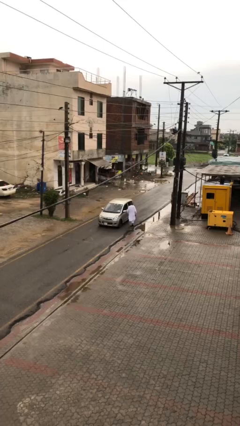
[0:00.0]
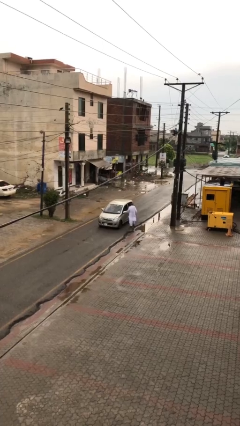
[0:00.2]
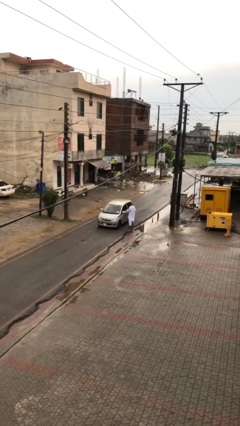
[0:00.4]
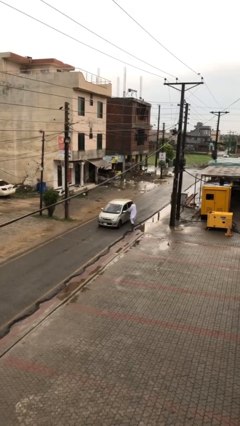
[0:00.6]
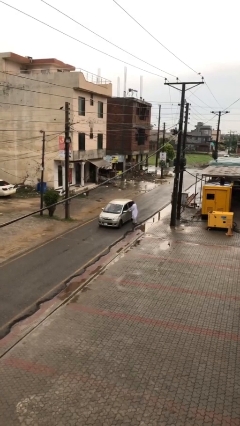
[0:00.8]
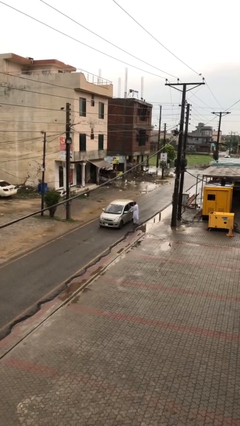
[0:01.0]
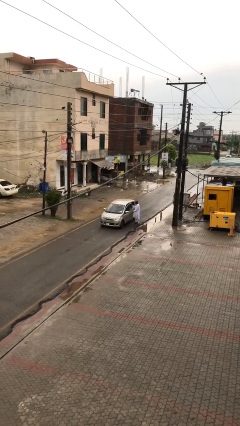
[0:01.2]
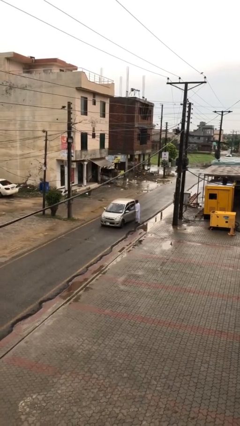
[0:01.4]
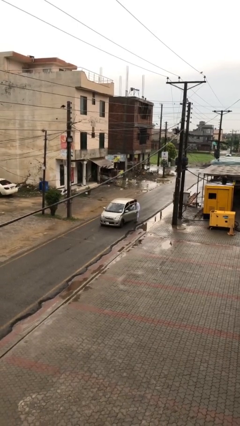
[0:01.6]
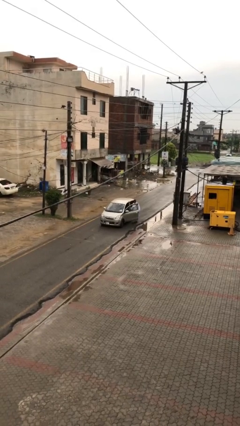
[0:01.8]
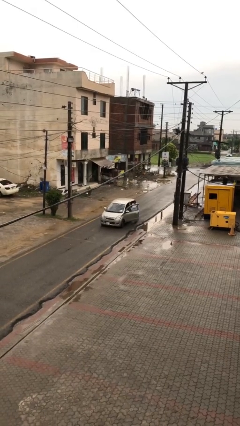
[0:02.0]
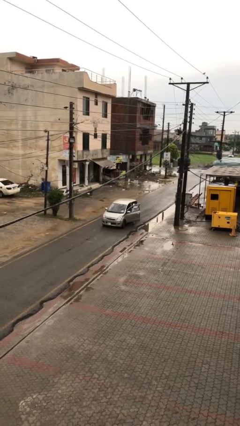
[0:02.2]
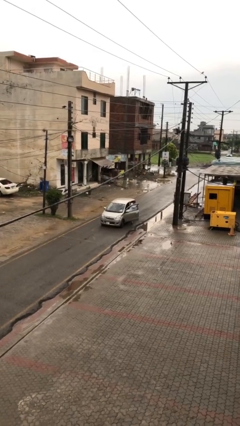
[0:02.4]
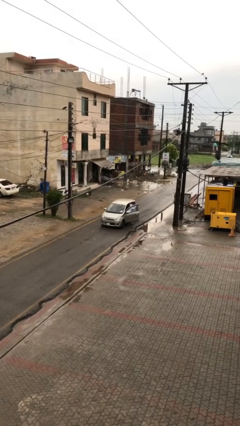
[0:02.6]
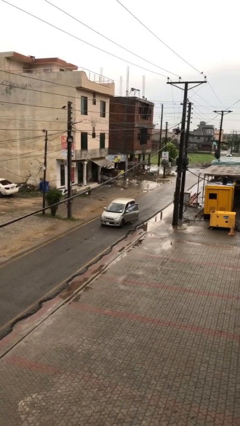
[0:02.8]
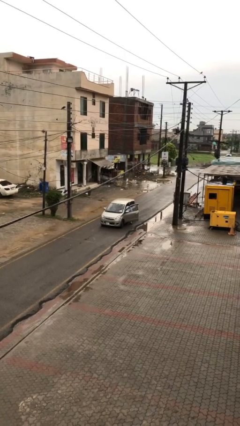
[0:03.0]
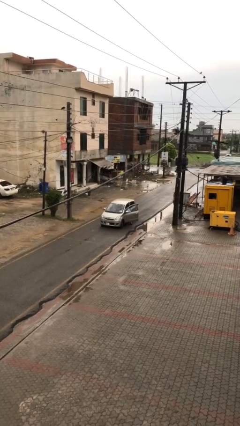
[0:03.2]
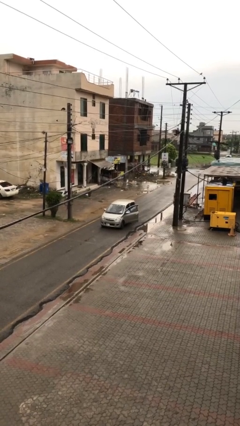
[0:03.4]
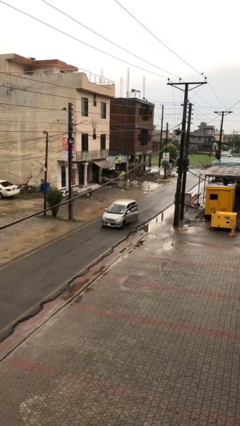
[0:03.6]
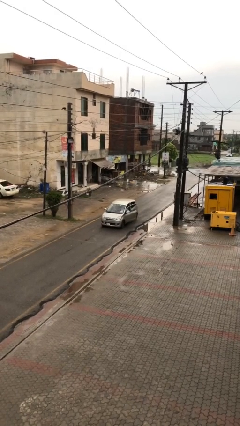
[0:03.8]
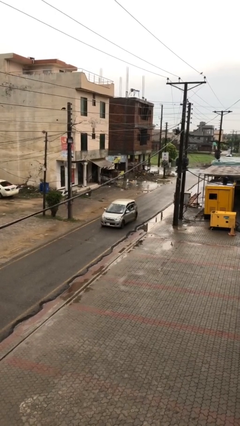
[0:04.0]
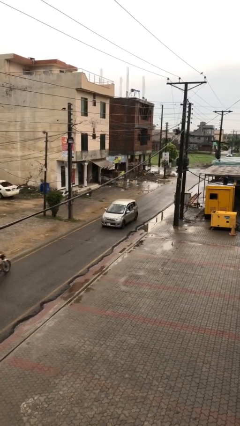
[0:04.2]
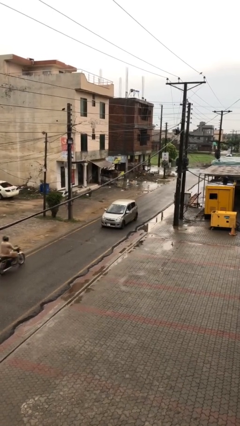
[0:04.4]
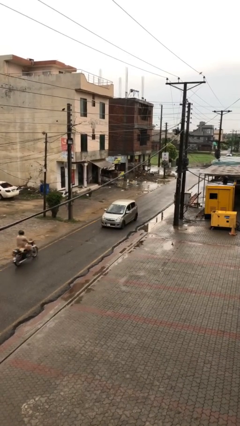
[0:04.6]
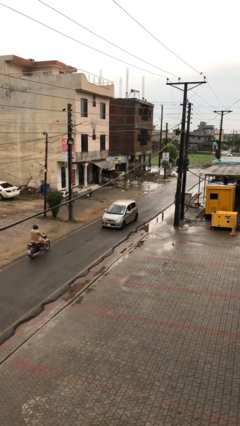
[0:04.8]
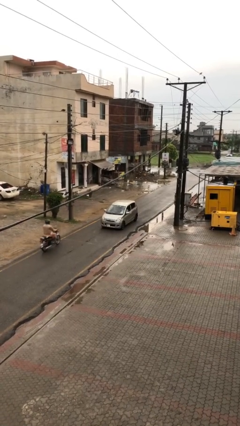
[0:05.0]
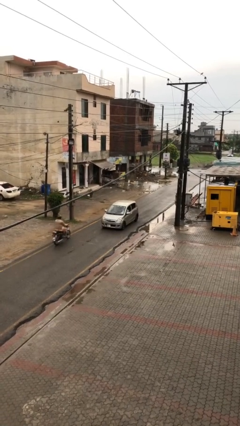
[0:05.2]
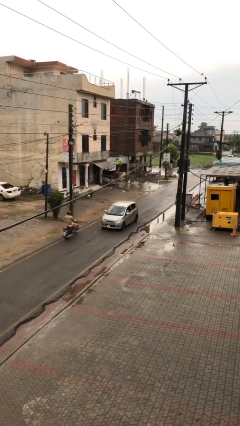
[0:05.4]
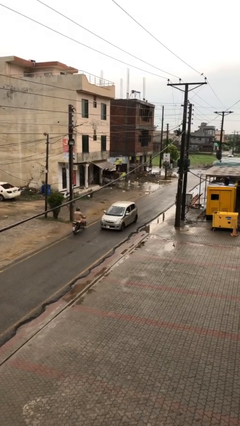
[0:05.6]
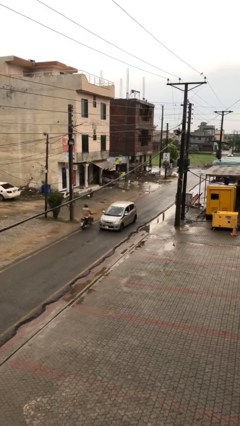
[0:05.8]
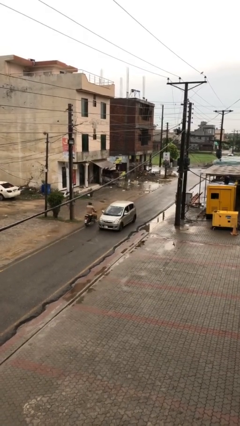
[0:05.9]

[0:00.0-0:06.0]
car picks up person

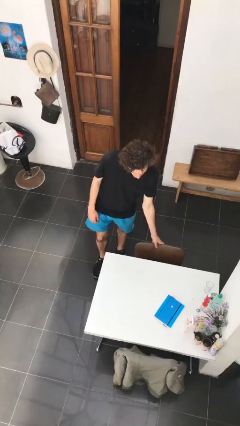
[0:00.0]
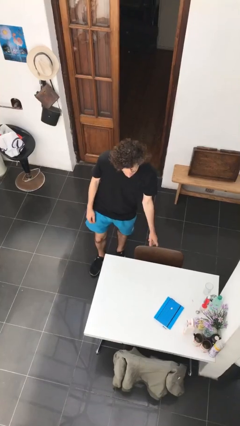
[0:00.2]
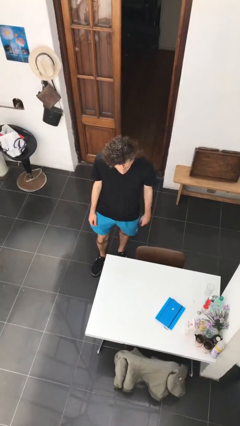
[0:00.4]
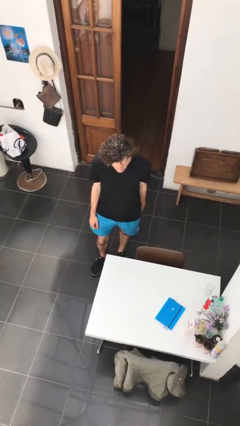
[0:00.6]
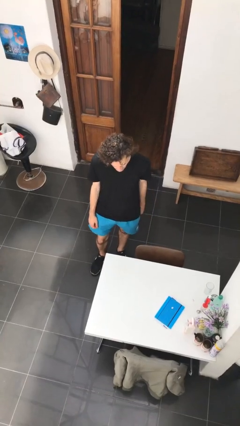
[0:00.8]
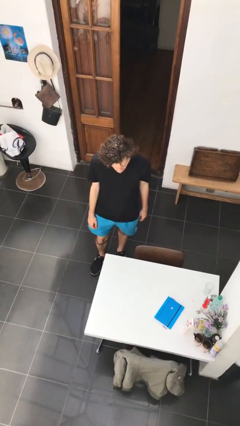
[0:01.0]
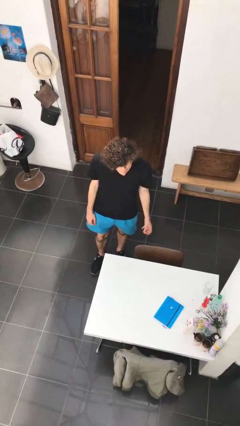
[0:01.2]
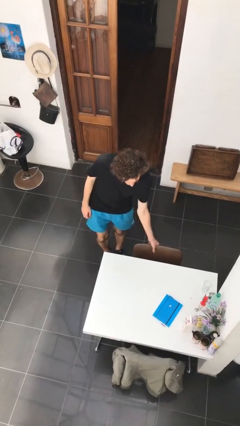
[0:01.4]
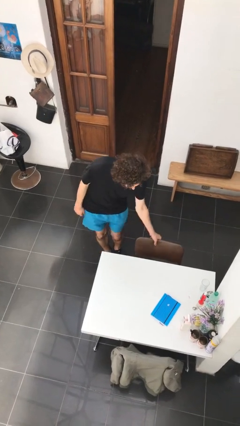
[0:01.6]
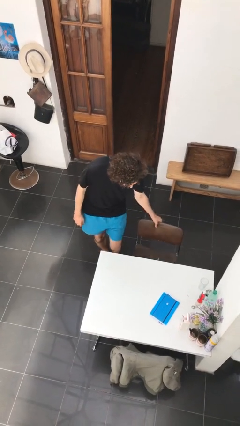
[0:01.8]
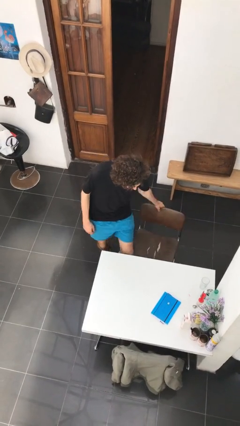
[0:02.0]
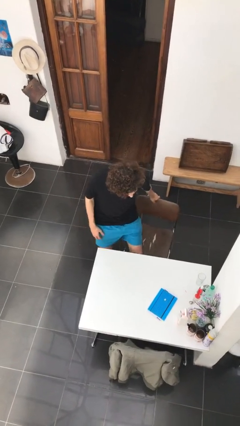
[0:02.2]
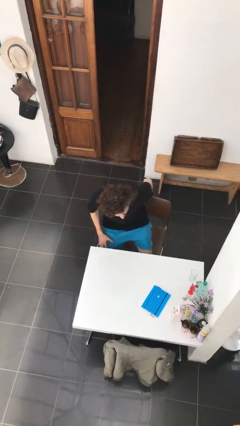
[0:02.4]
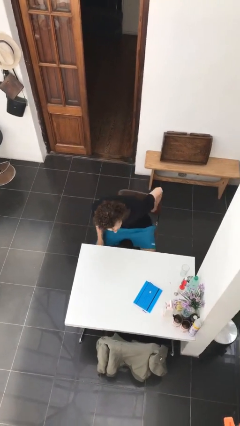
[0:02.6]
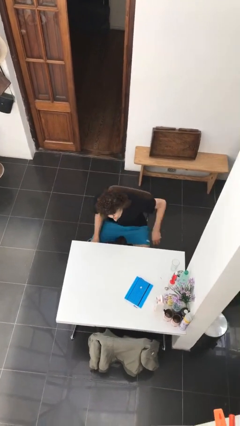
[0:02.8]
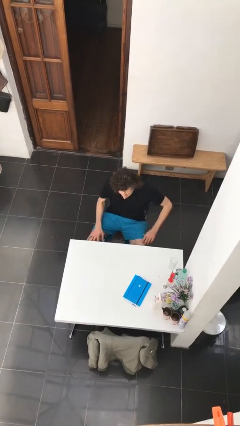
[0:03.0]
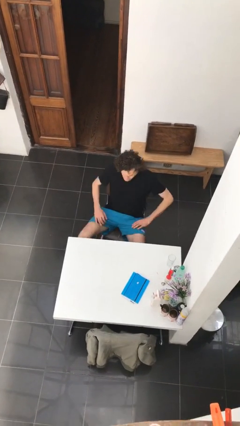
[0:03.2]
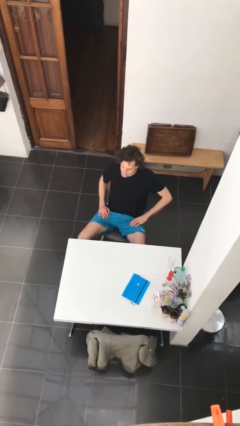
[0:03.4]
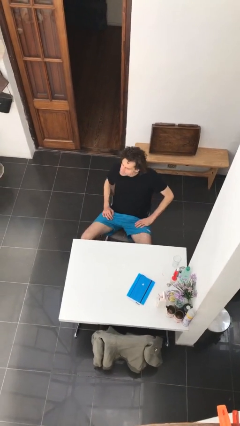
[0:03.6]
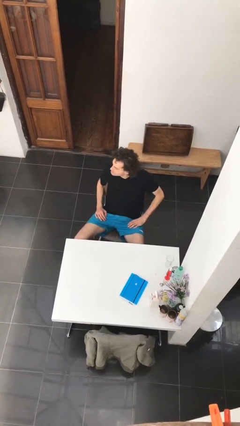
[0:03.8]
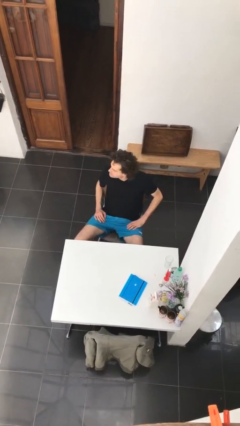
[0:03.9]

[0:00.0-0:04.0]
person sits down

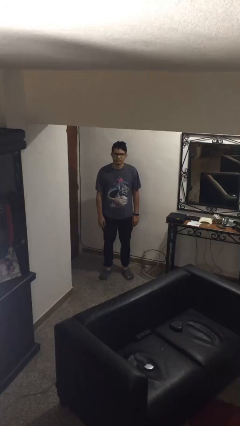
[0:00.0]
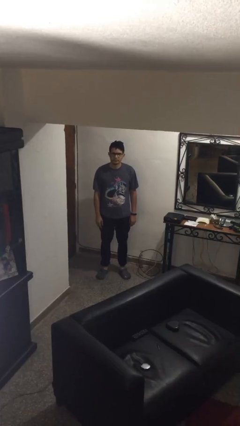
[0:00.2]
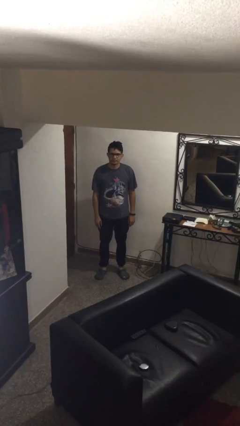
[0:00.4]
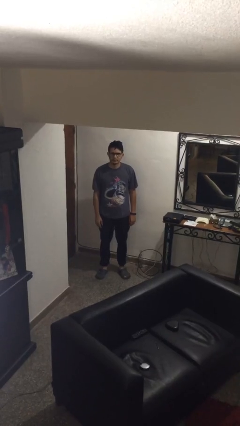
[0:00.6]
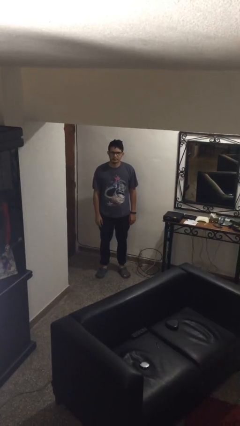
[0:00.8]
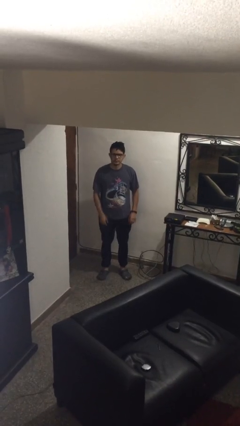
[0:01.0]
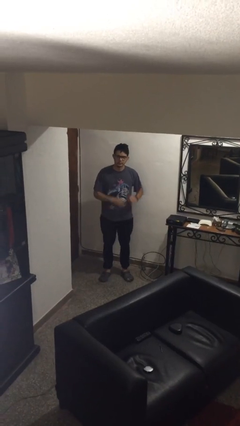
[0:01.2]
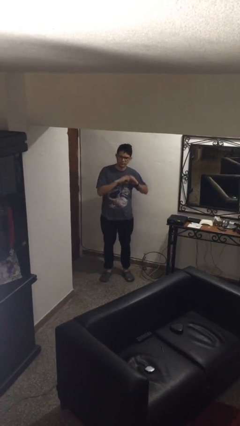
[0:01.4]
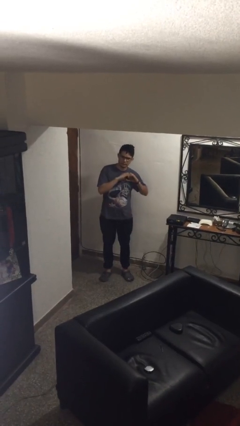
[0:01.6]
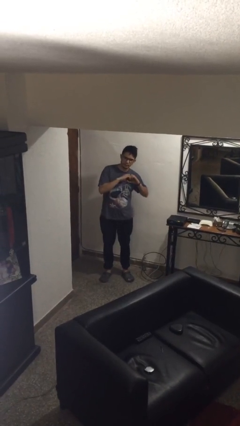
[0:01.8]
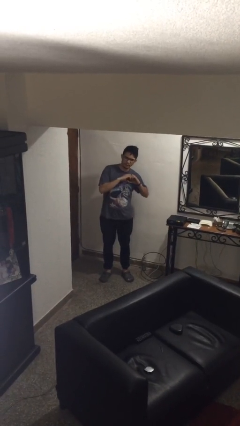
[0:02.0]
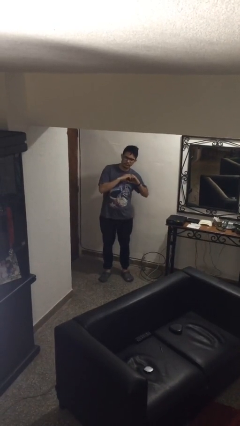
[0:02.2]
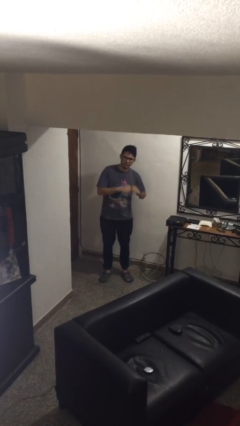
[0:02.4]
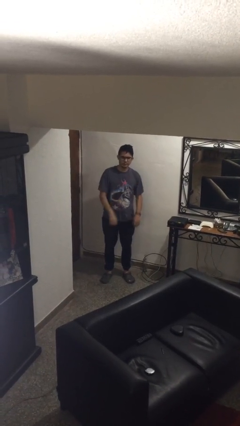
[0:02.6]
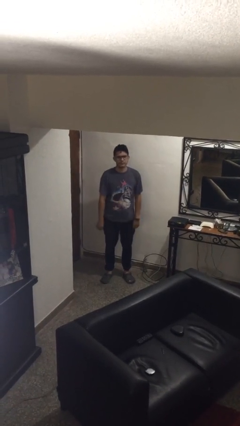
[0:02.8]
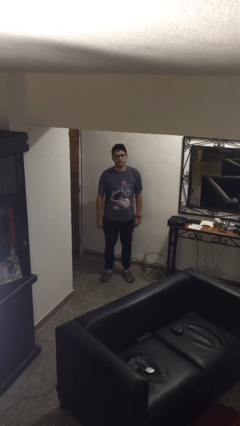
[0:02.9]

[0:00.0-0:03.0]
person gestures heart

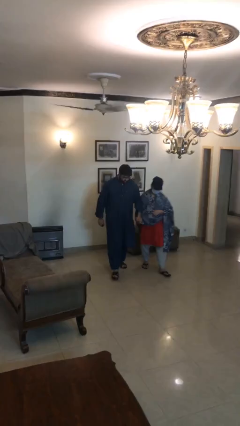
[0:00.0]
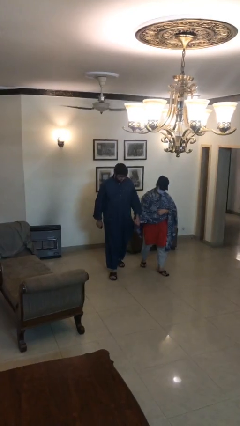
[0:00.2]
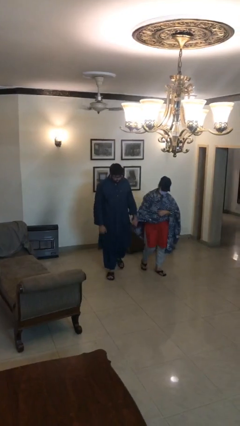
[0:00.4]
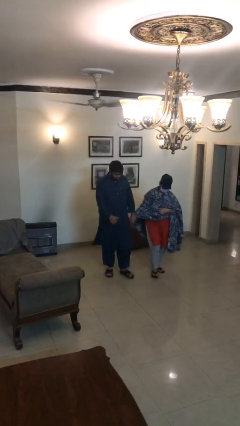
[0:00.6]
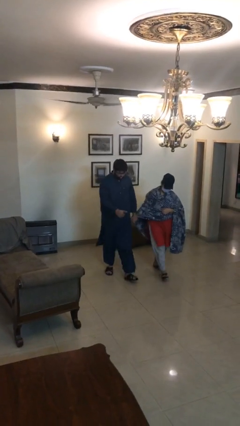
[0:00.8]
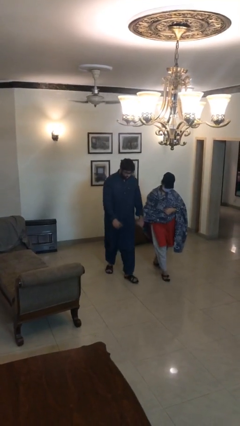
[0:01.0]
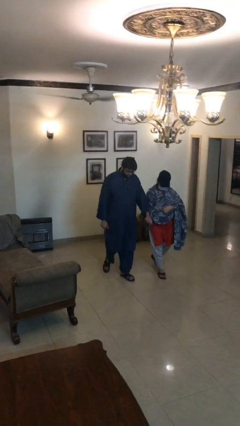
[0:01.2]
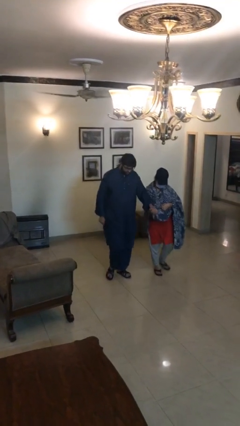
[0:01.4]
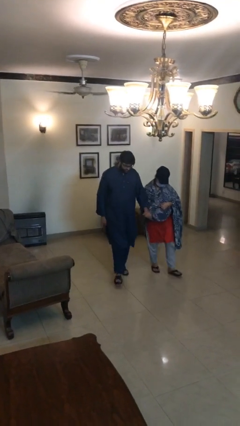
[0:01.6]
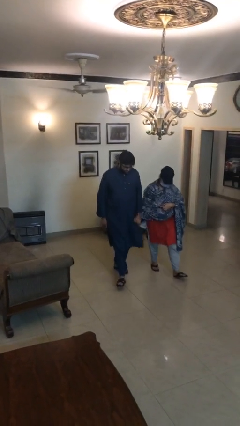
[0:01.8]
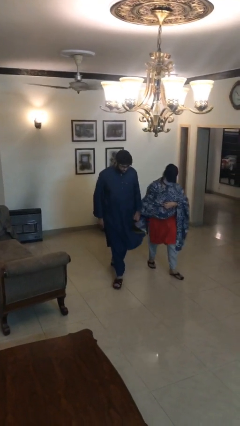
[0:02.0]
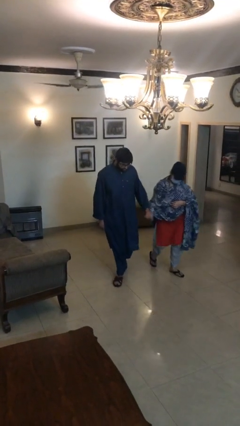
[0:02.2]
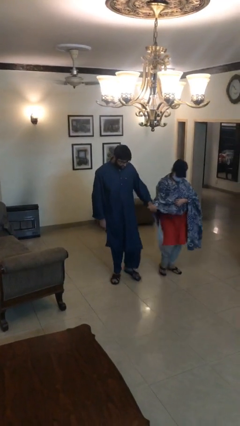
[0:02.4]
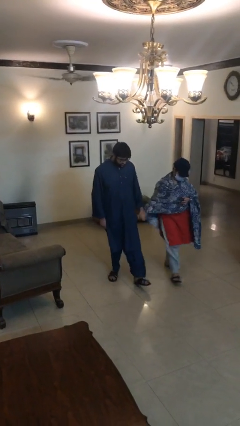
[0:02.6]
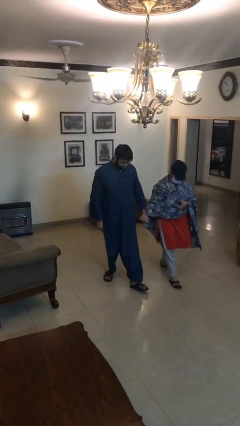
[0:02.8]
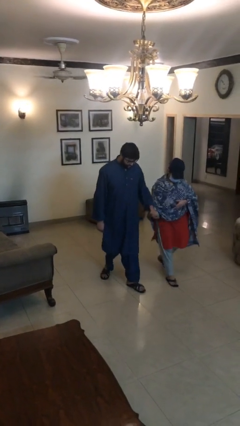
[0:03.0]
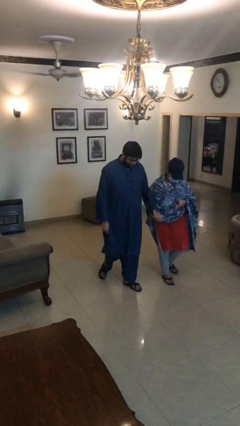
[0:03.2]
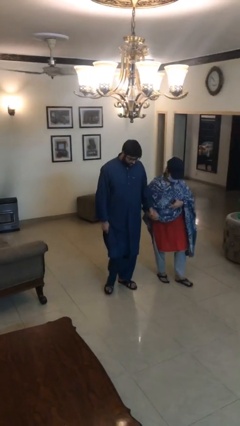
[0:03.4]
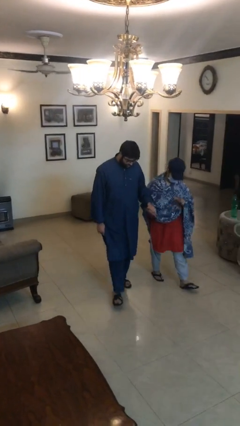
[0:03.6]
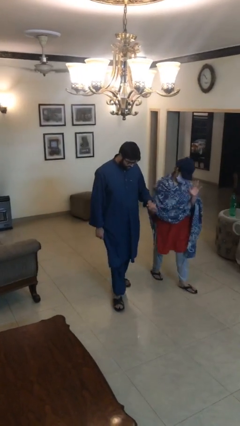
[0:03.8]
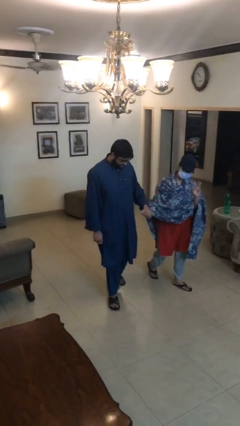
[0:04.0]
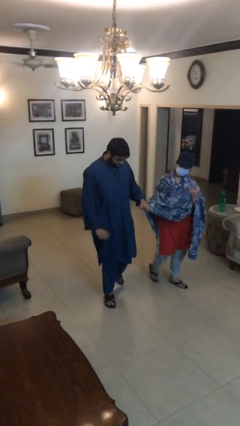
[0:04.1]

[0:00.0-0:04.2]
person holds hand

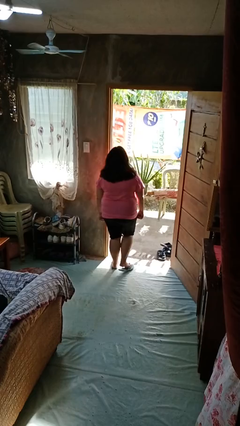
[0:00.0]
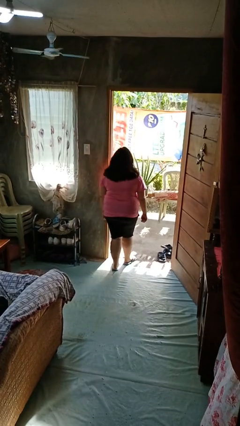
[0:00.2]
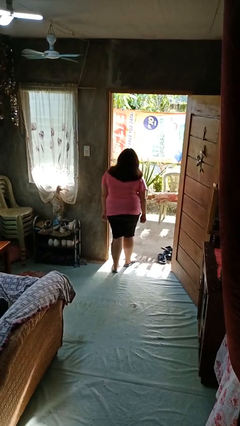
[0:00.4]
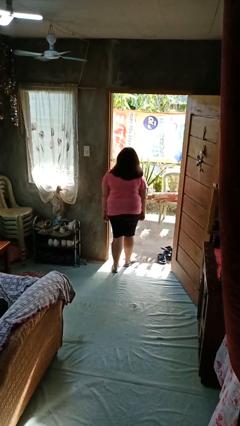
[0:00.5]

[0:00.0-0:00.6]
person bumps into wall
